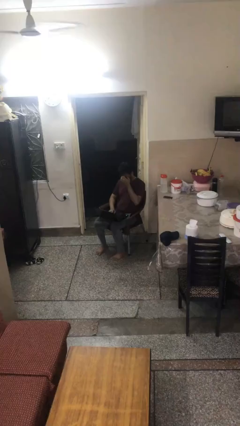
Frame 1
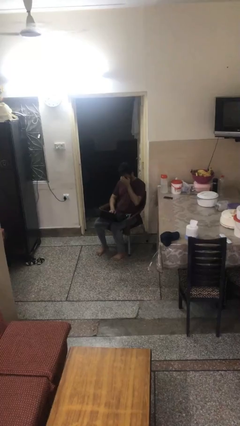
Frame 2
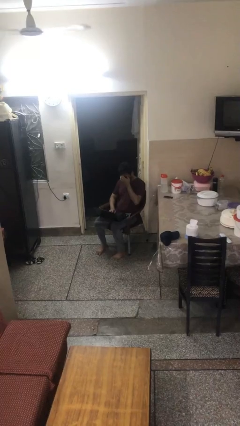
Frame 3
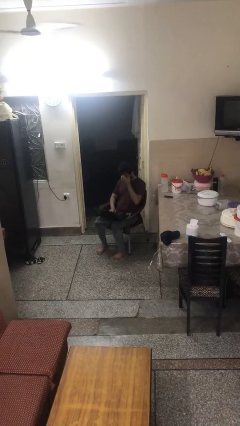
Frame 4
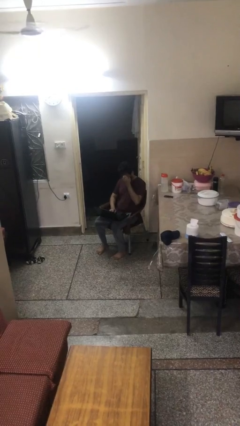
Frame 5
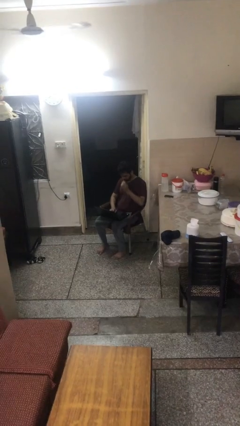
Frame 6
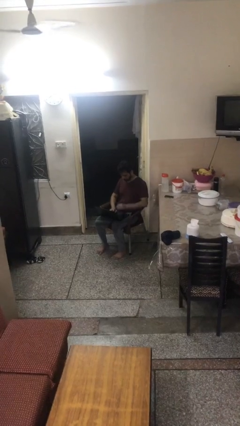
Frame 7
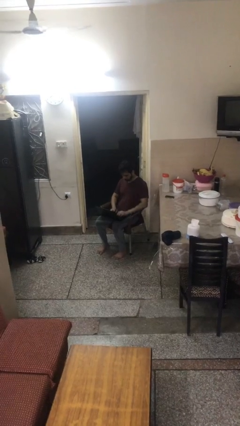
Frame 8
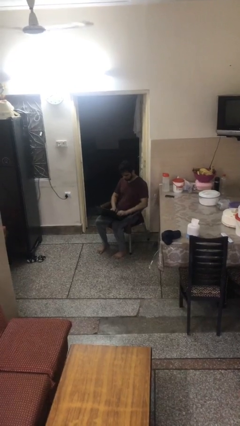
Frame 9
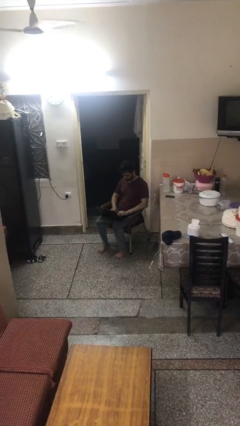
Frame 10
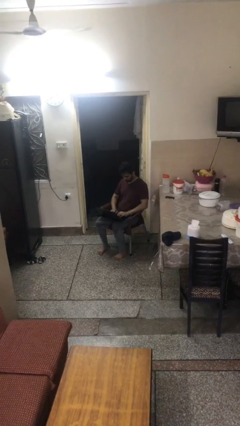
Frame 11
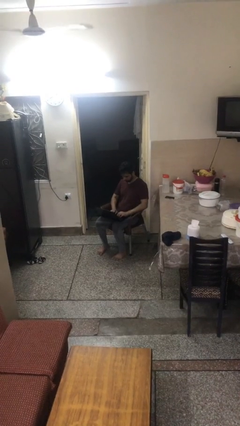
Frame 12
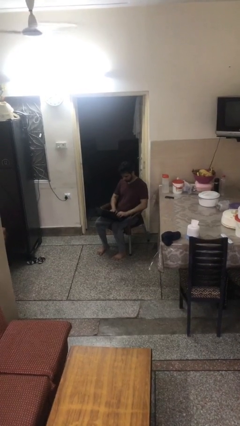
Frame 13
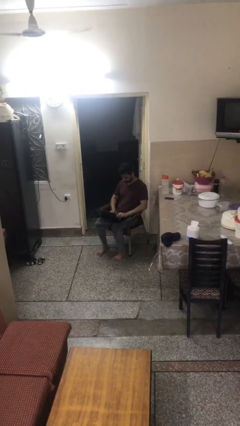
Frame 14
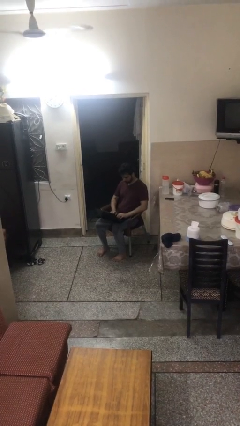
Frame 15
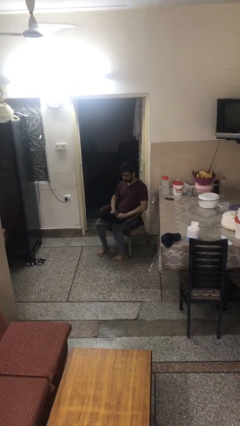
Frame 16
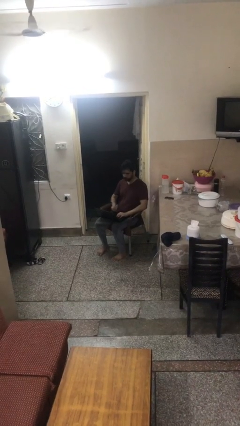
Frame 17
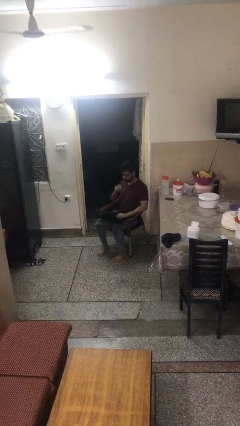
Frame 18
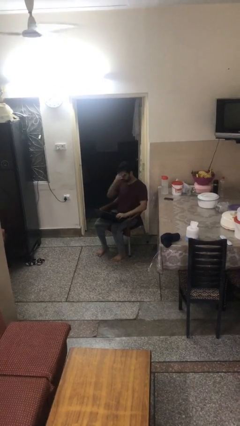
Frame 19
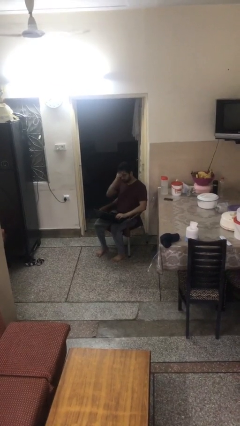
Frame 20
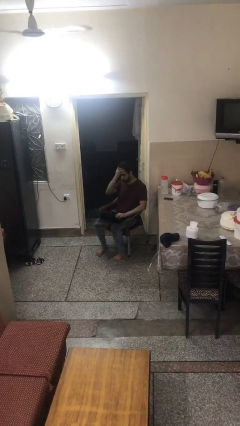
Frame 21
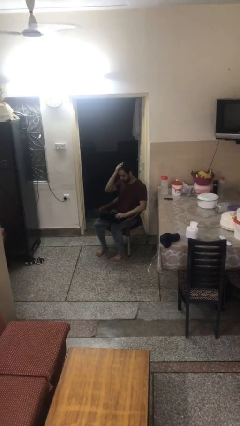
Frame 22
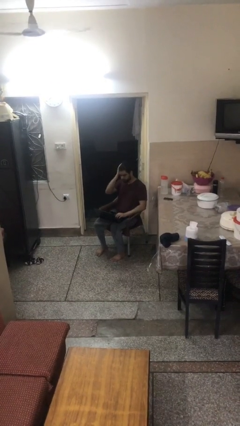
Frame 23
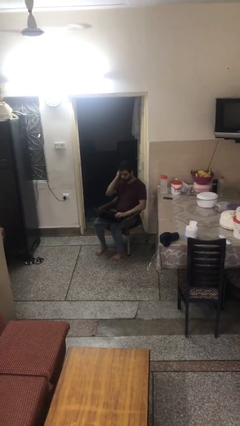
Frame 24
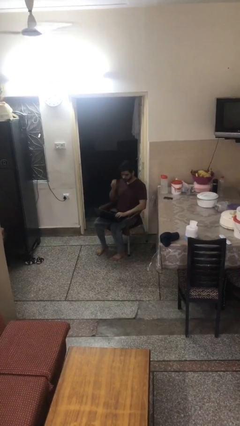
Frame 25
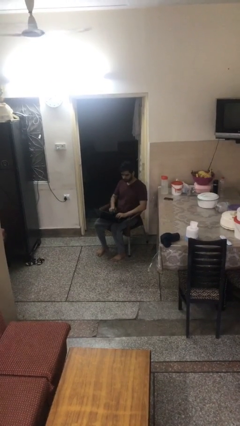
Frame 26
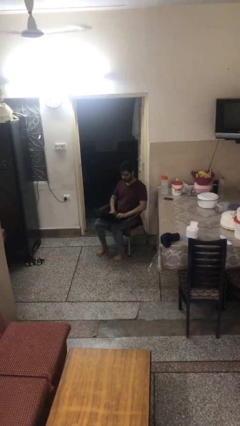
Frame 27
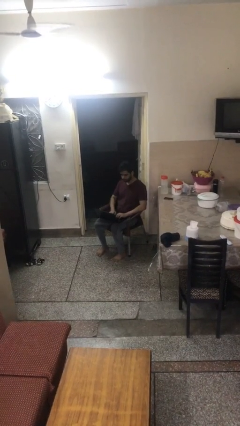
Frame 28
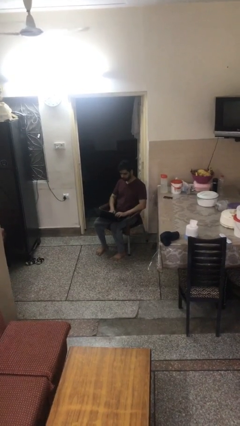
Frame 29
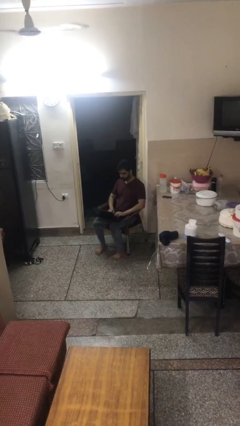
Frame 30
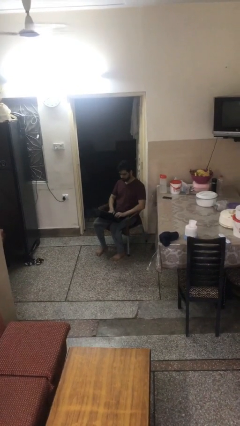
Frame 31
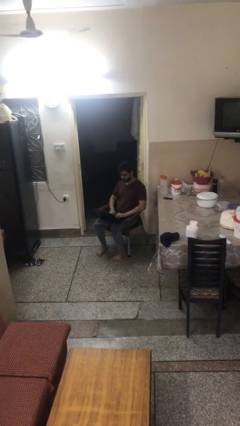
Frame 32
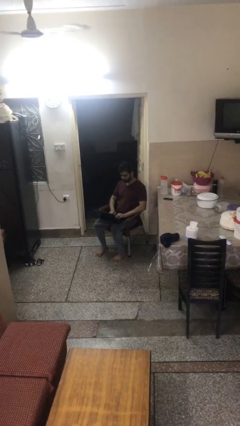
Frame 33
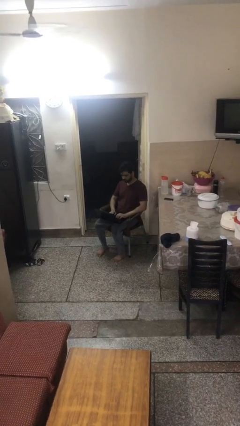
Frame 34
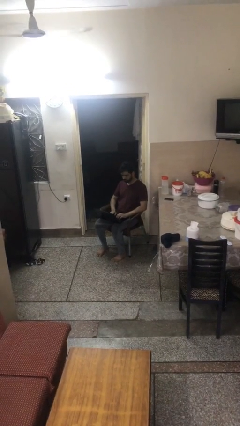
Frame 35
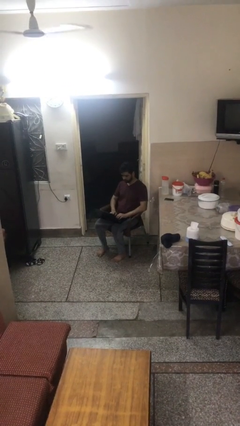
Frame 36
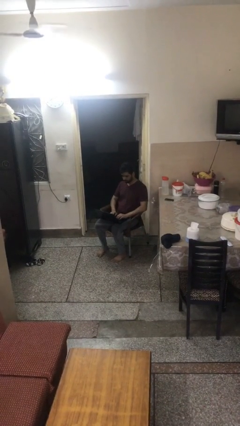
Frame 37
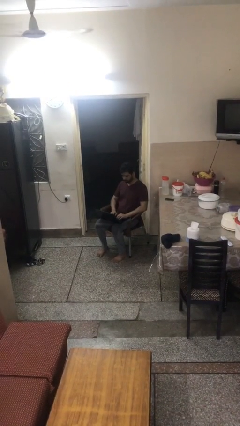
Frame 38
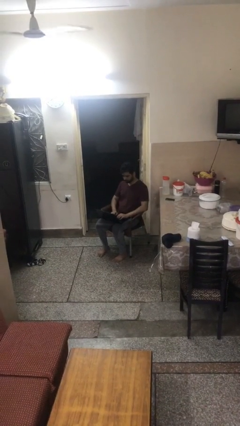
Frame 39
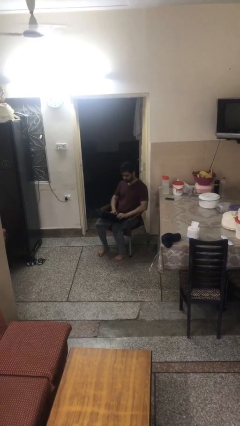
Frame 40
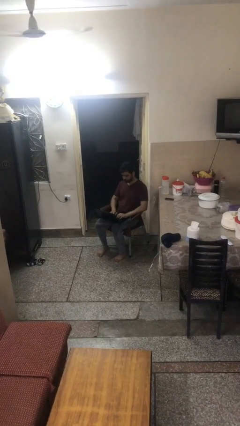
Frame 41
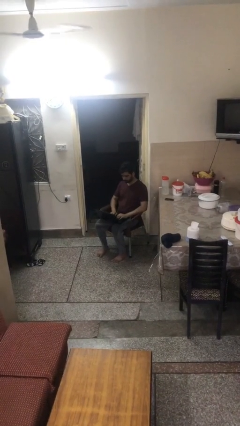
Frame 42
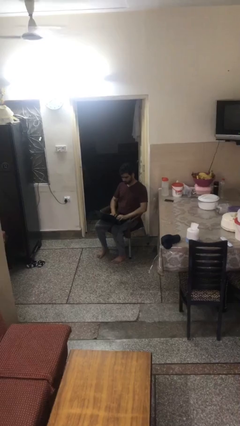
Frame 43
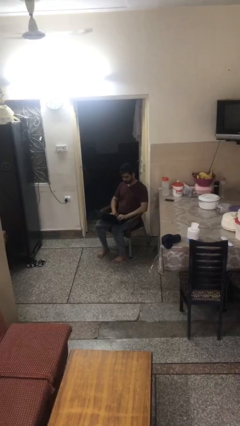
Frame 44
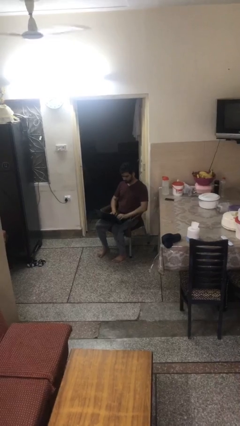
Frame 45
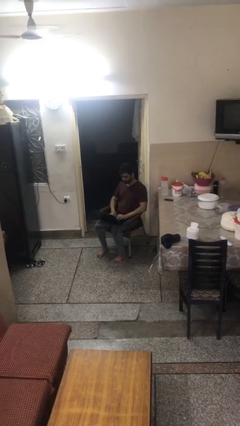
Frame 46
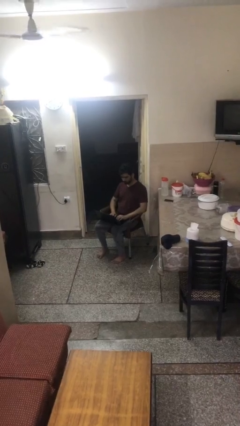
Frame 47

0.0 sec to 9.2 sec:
person interacts with laptop

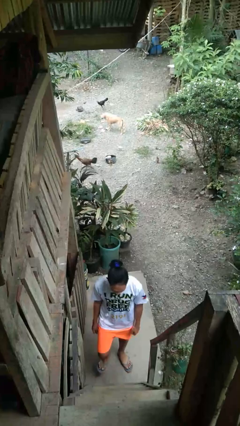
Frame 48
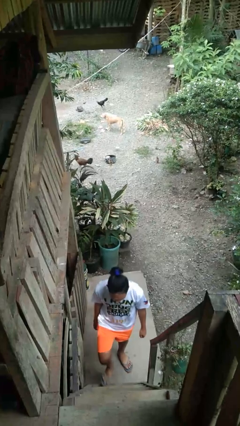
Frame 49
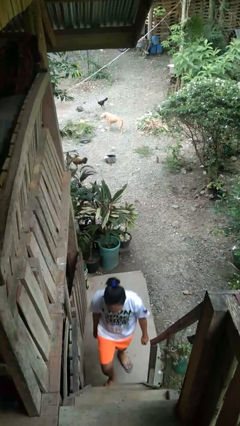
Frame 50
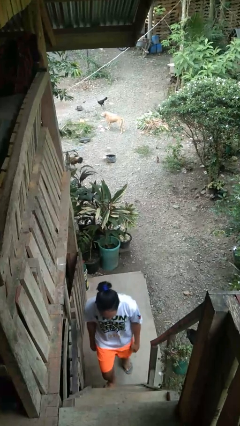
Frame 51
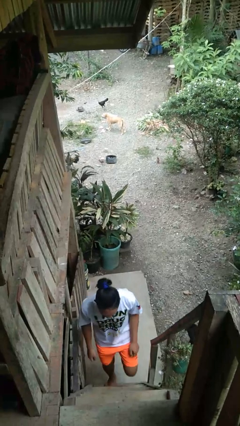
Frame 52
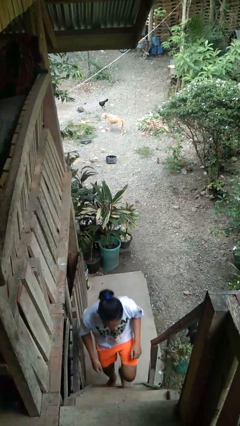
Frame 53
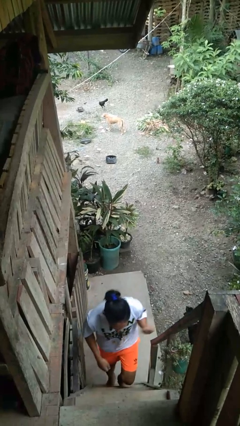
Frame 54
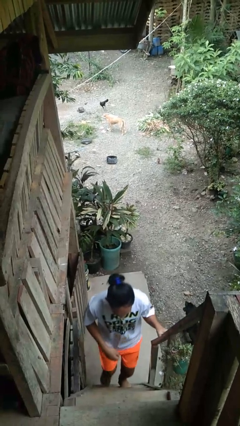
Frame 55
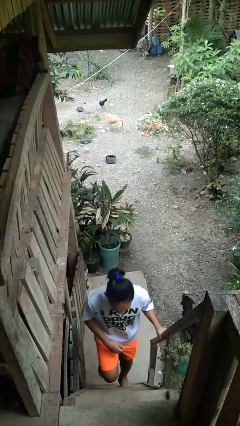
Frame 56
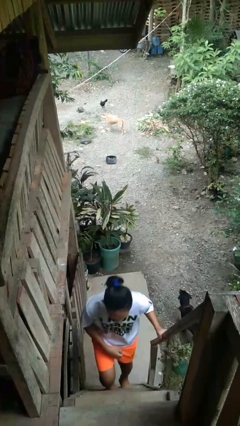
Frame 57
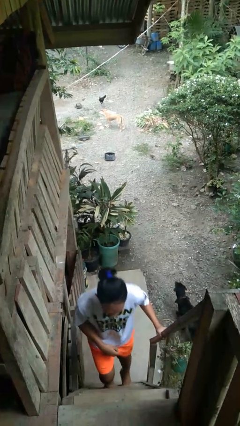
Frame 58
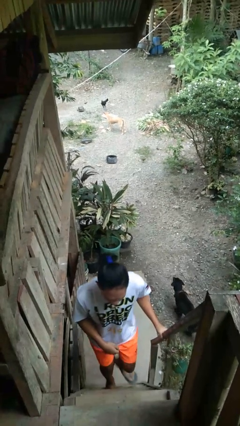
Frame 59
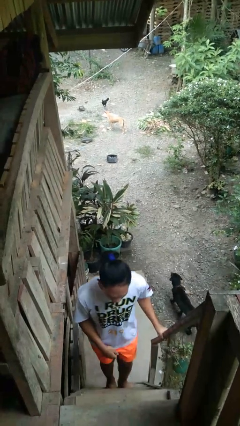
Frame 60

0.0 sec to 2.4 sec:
person climbs up stairs

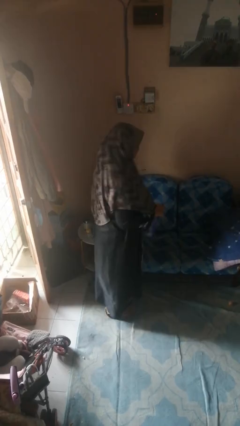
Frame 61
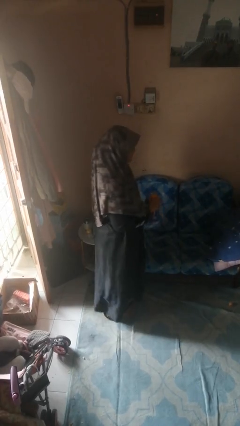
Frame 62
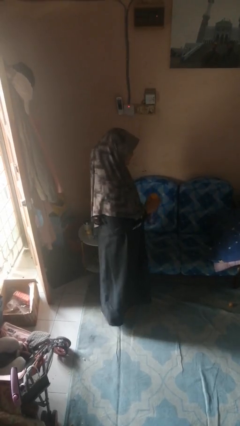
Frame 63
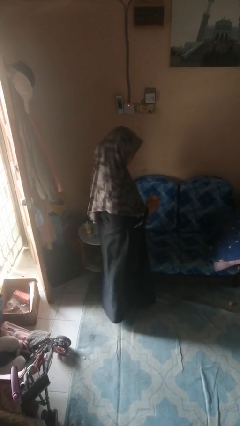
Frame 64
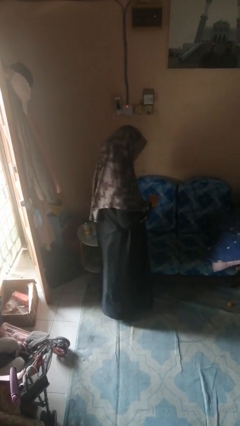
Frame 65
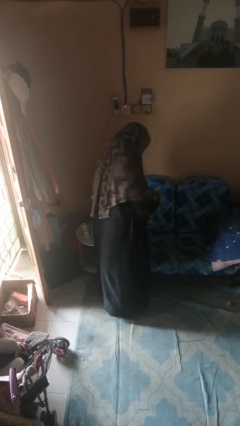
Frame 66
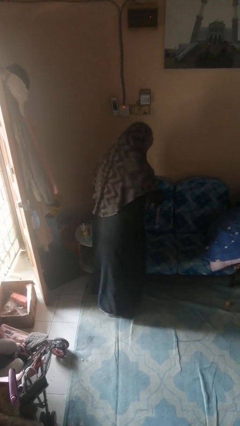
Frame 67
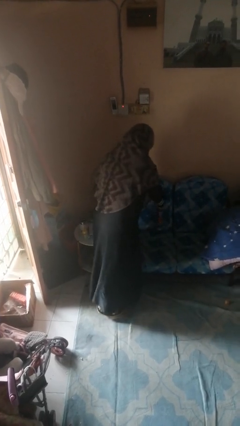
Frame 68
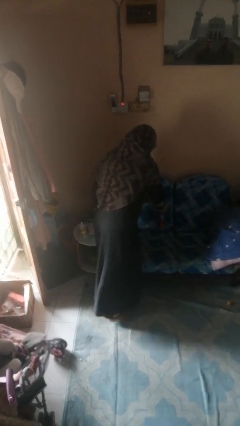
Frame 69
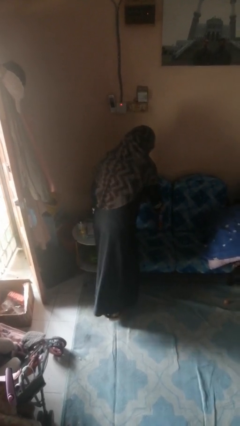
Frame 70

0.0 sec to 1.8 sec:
person puts down object on couch

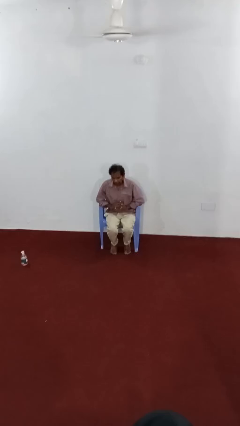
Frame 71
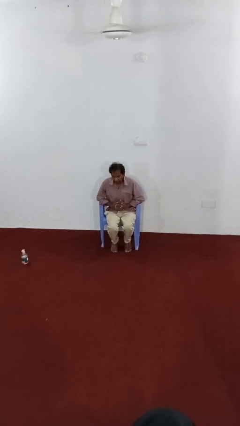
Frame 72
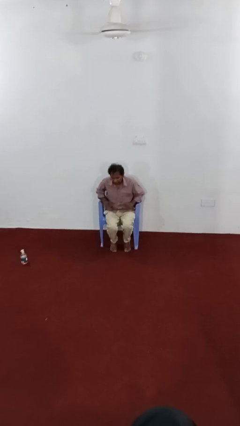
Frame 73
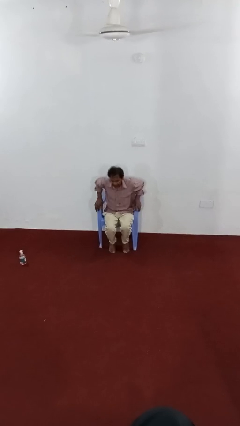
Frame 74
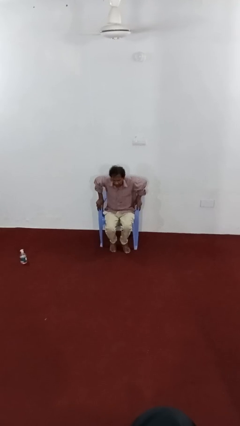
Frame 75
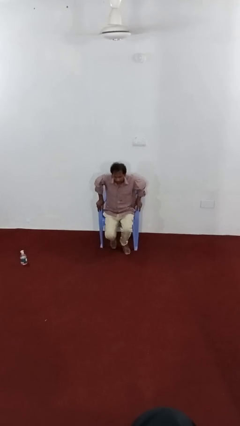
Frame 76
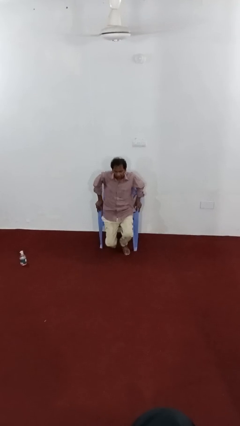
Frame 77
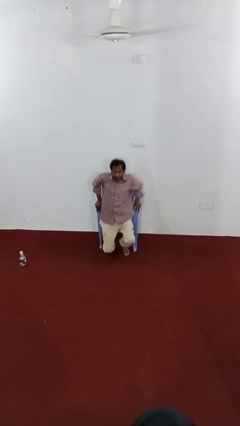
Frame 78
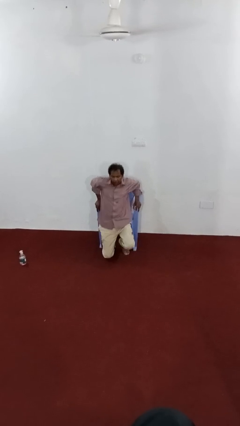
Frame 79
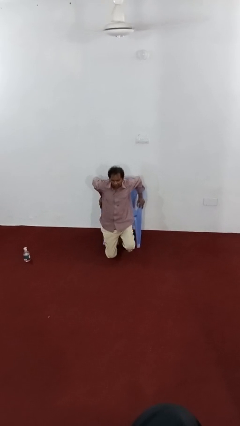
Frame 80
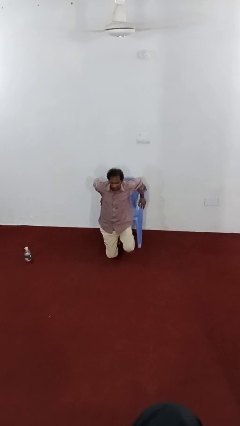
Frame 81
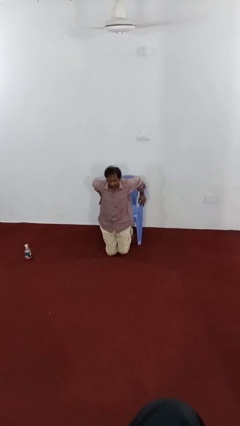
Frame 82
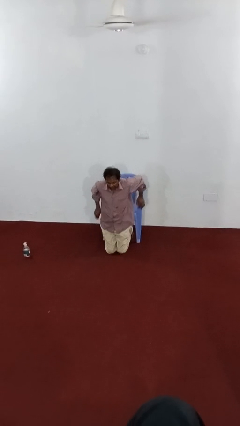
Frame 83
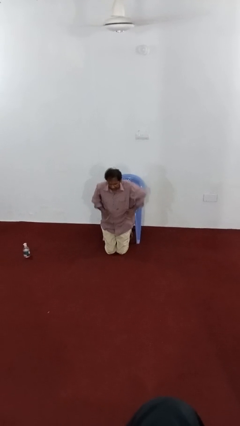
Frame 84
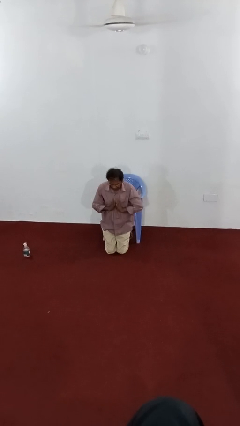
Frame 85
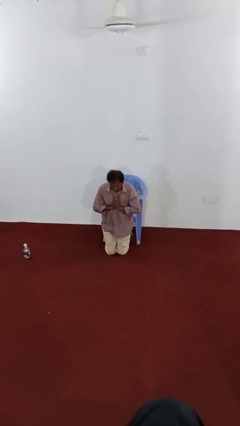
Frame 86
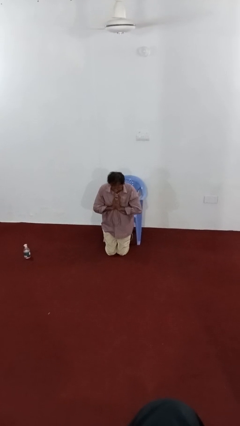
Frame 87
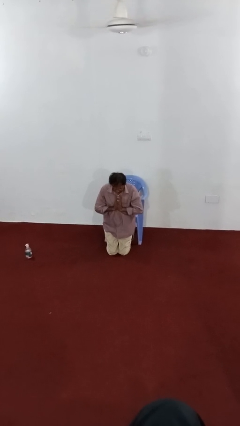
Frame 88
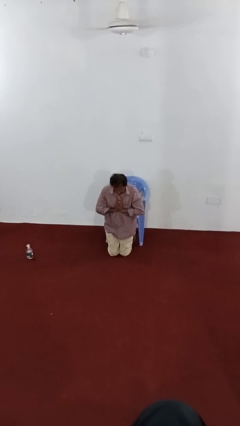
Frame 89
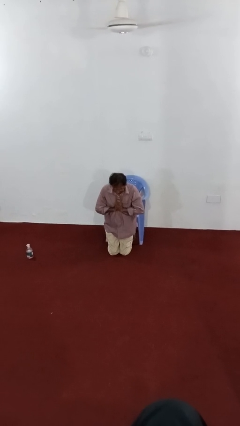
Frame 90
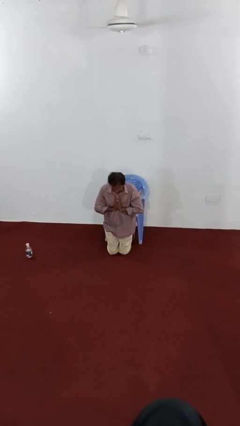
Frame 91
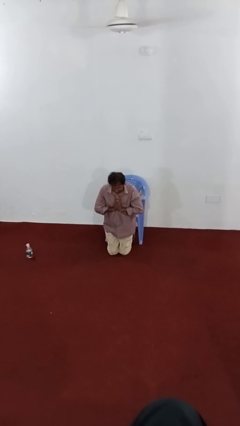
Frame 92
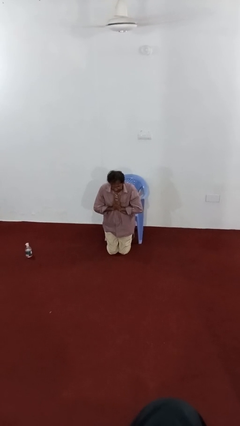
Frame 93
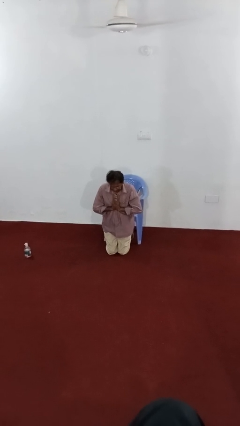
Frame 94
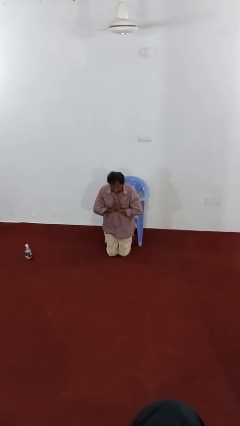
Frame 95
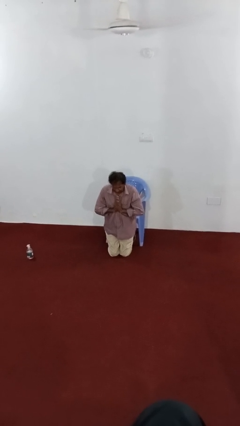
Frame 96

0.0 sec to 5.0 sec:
person prays
